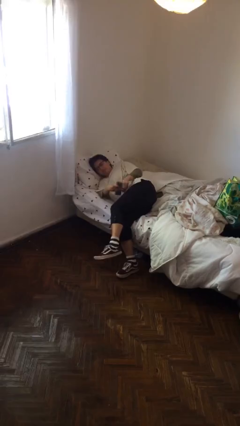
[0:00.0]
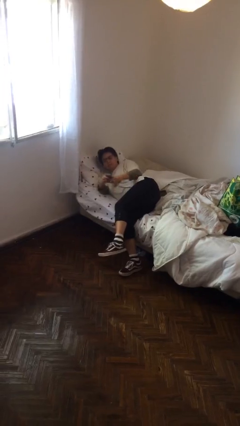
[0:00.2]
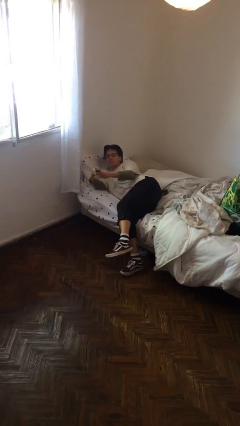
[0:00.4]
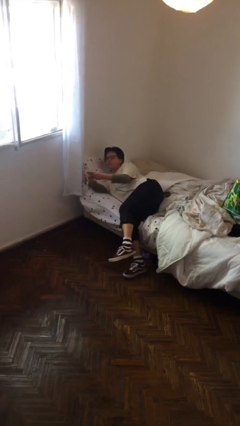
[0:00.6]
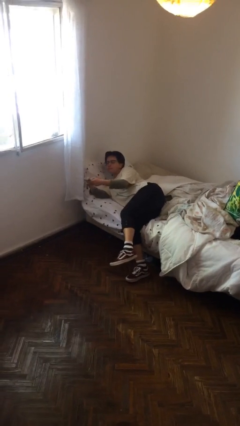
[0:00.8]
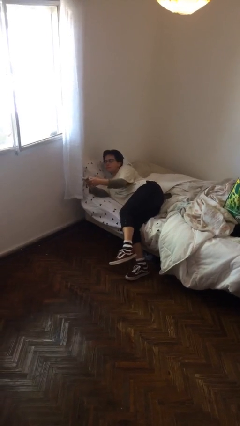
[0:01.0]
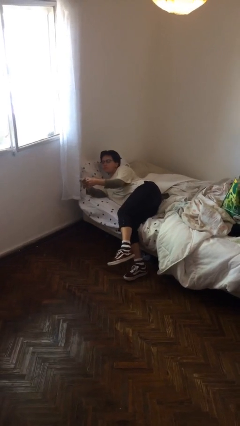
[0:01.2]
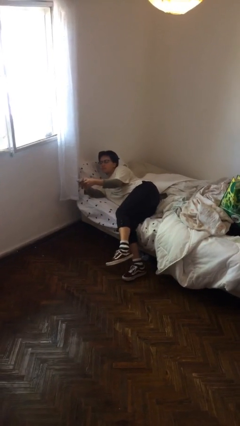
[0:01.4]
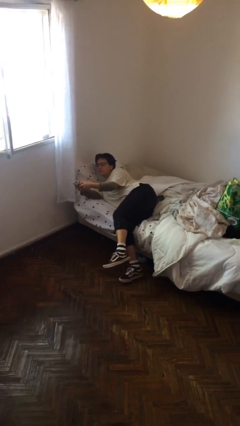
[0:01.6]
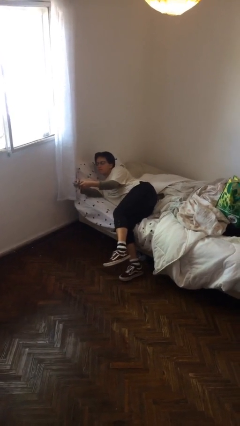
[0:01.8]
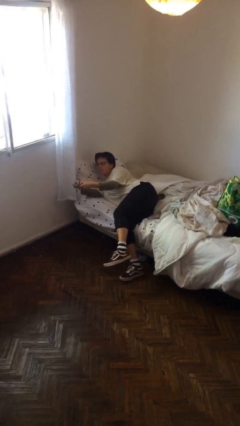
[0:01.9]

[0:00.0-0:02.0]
person uses television remote

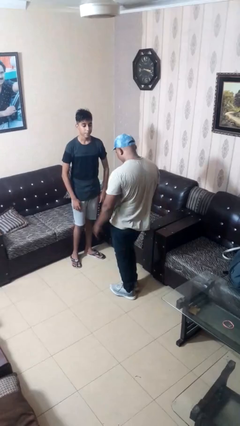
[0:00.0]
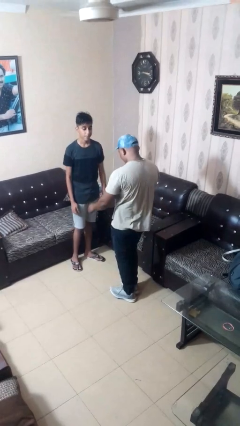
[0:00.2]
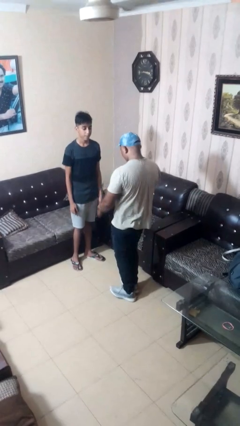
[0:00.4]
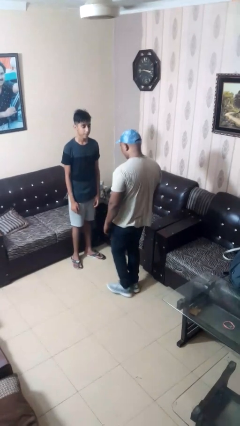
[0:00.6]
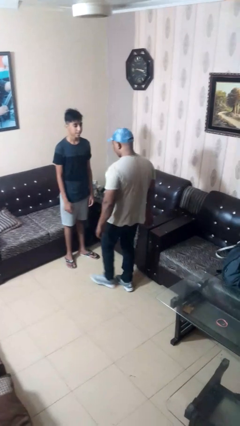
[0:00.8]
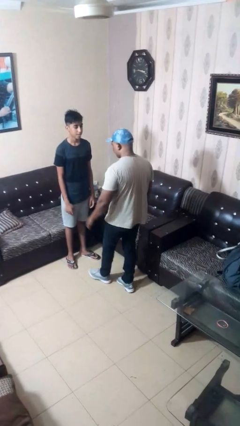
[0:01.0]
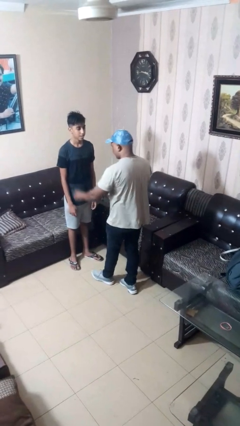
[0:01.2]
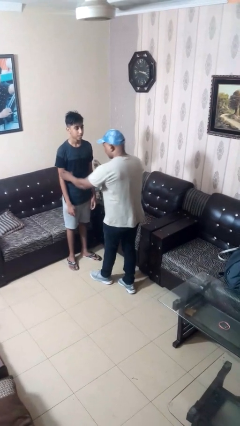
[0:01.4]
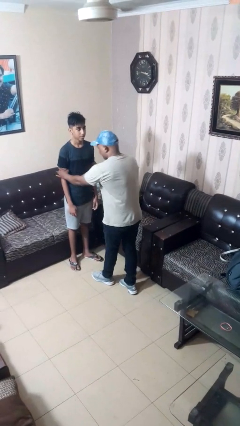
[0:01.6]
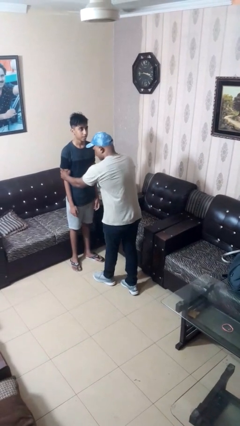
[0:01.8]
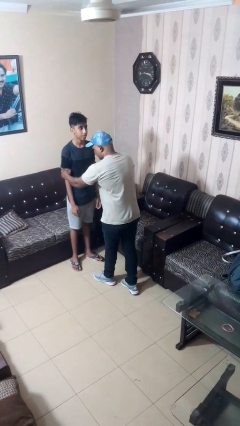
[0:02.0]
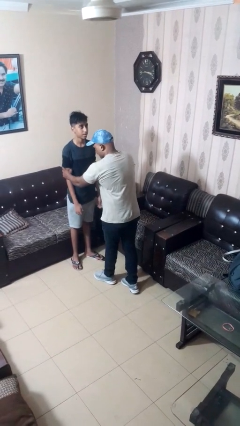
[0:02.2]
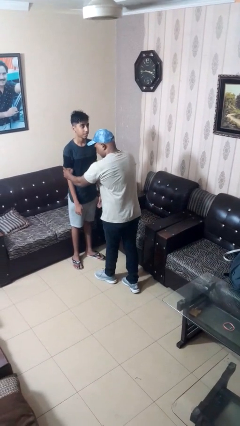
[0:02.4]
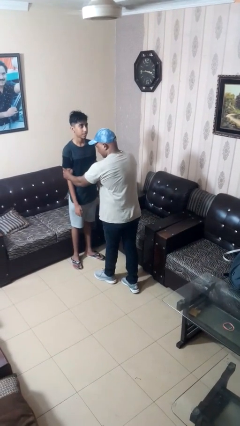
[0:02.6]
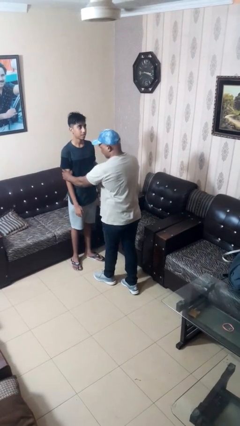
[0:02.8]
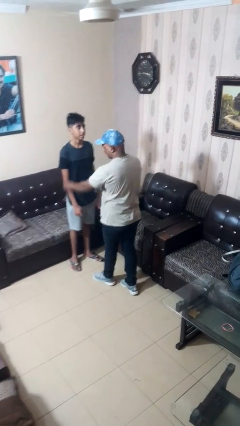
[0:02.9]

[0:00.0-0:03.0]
person grabs person by bicep

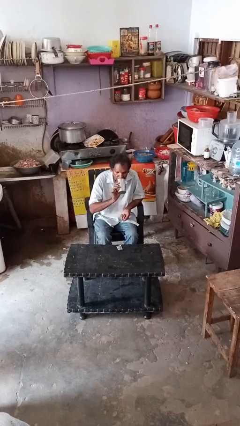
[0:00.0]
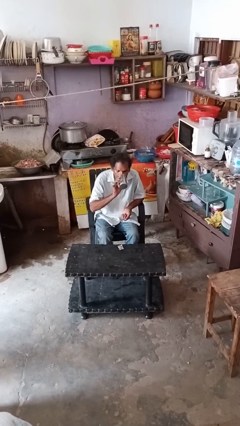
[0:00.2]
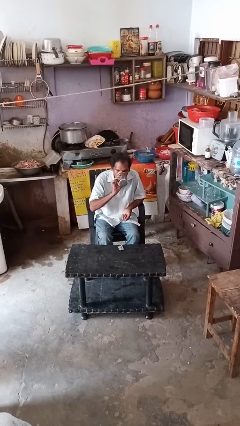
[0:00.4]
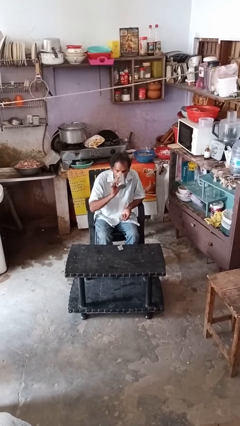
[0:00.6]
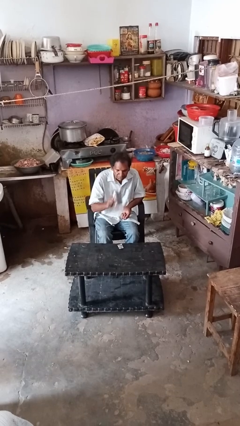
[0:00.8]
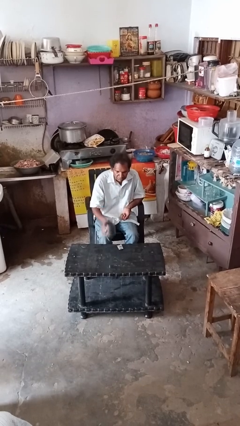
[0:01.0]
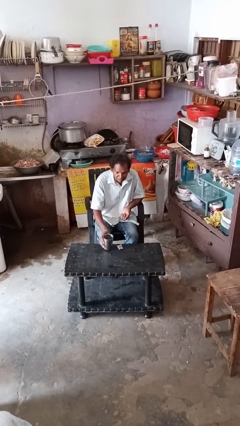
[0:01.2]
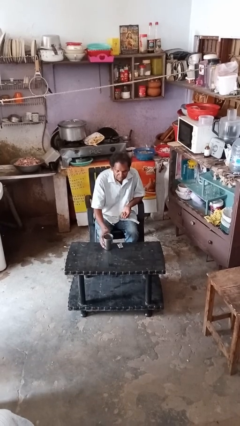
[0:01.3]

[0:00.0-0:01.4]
person drinks from cup

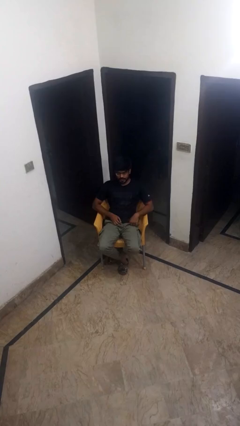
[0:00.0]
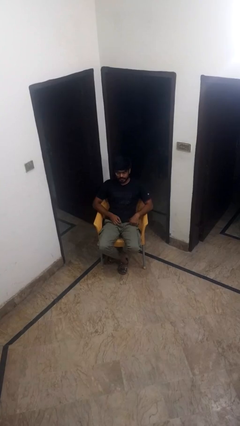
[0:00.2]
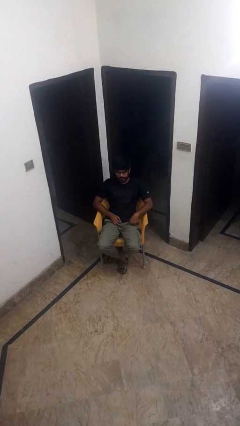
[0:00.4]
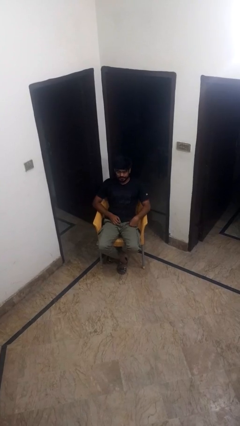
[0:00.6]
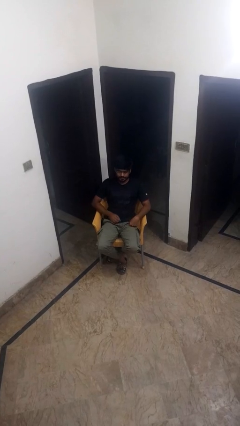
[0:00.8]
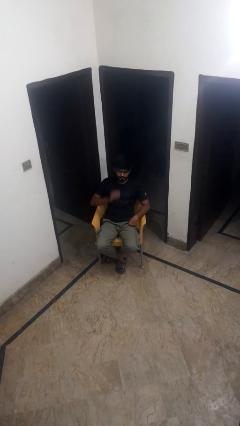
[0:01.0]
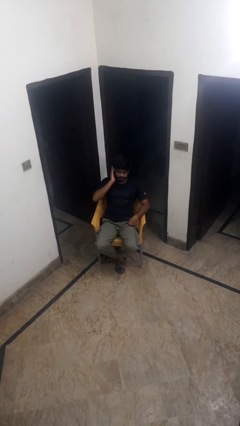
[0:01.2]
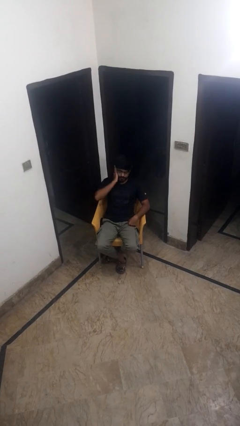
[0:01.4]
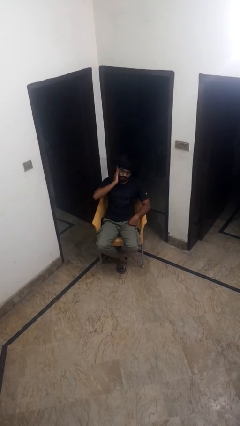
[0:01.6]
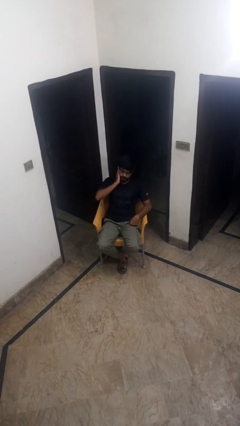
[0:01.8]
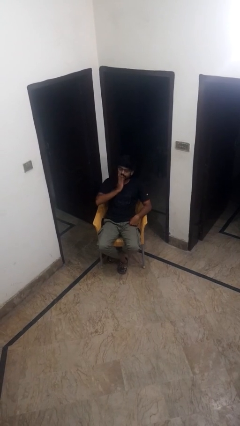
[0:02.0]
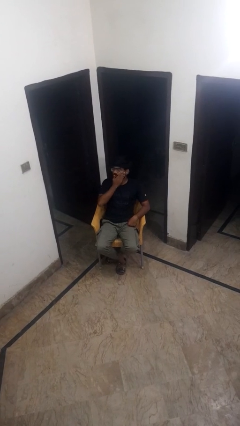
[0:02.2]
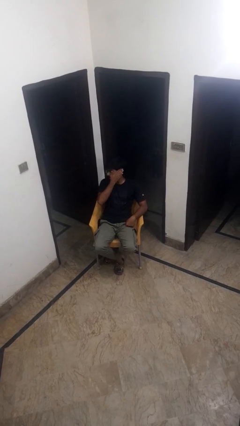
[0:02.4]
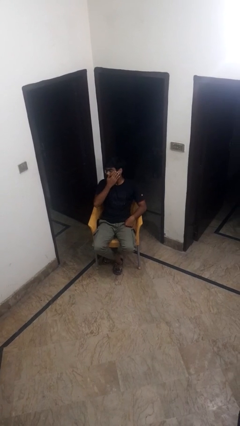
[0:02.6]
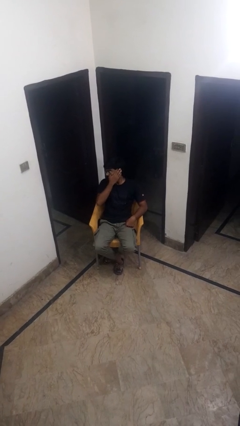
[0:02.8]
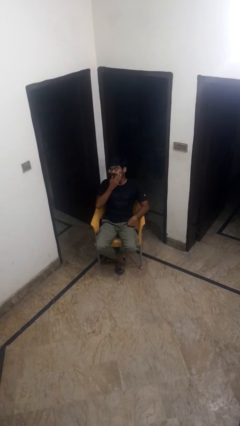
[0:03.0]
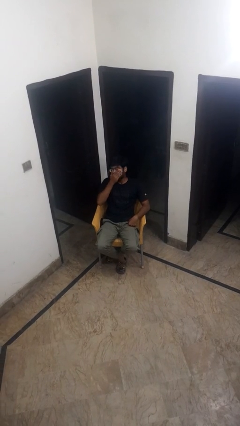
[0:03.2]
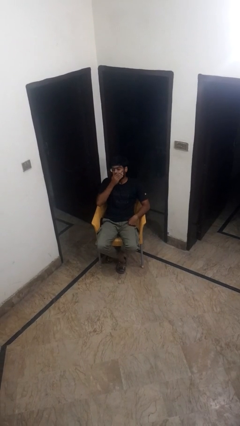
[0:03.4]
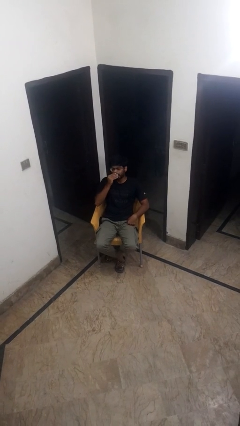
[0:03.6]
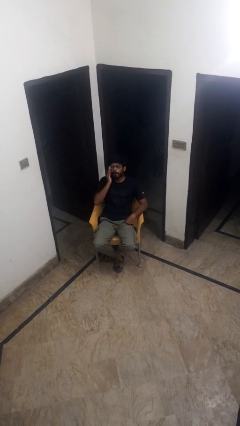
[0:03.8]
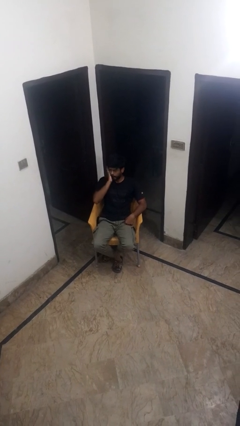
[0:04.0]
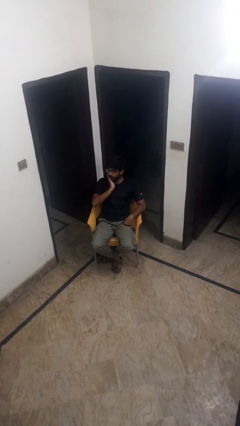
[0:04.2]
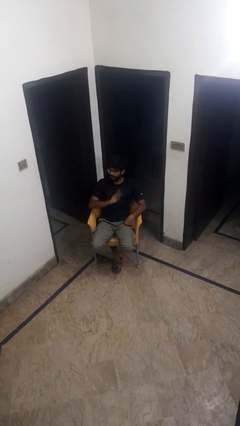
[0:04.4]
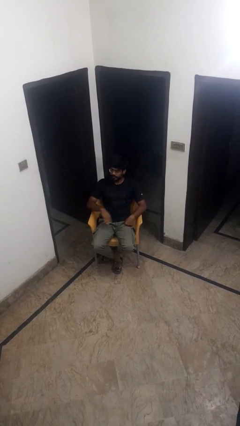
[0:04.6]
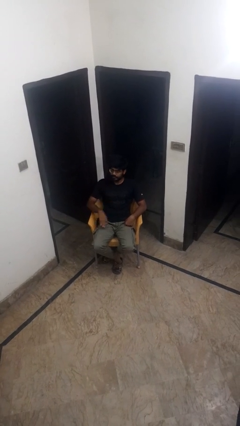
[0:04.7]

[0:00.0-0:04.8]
person scratches face

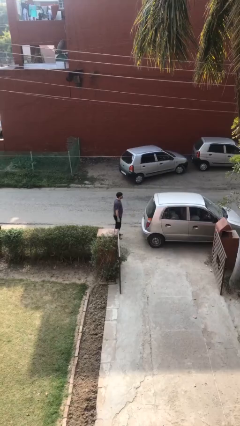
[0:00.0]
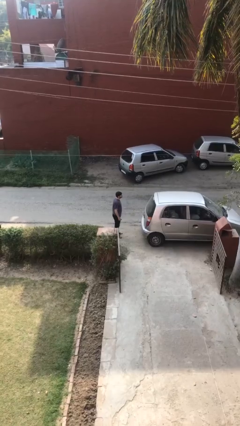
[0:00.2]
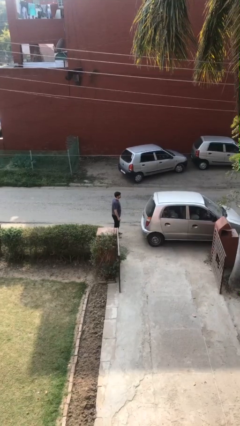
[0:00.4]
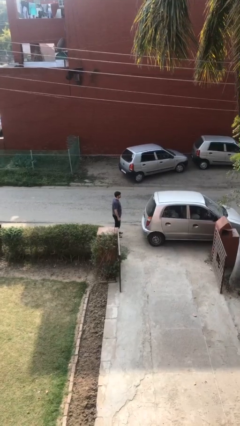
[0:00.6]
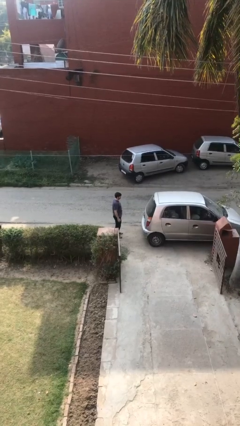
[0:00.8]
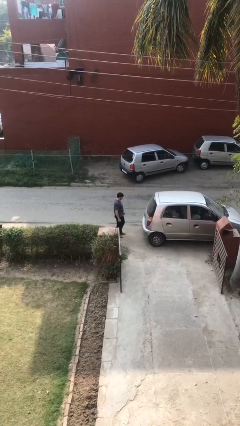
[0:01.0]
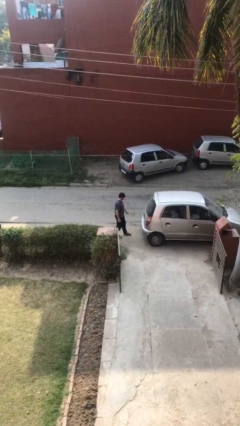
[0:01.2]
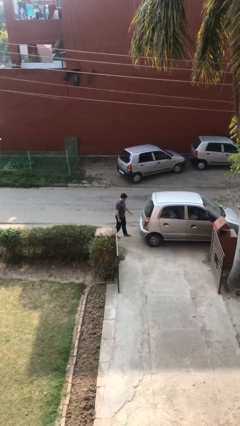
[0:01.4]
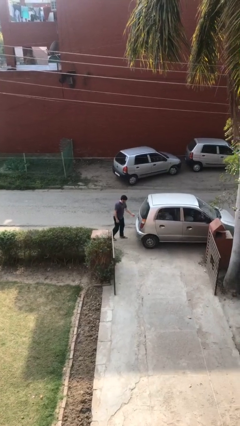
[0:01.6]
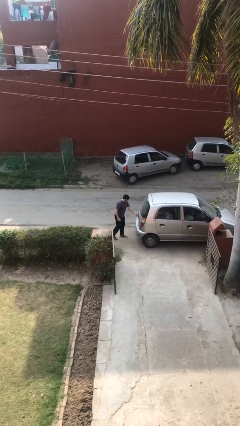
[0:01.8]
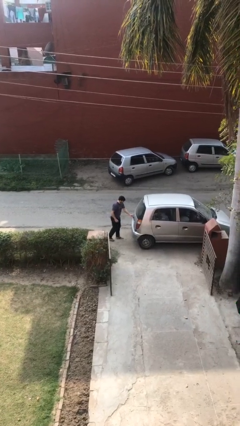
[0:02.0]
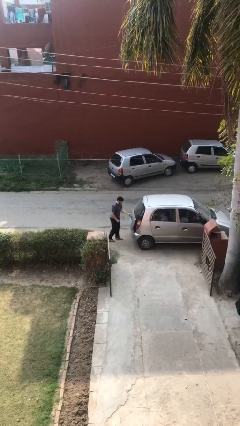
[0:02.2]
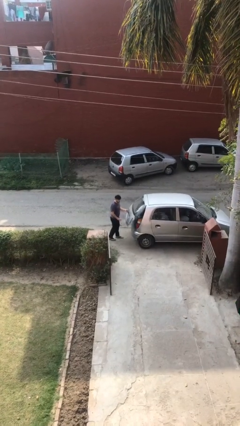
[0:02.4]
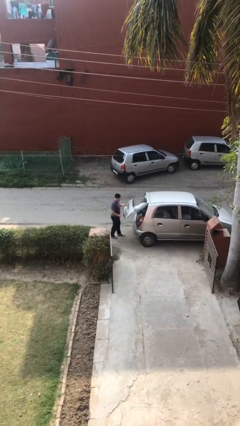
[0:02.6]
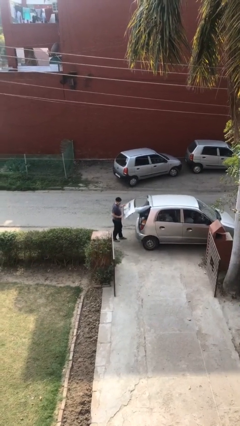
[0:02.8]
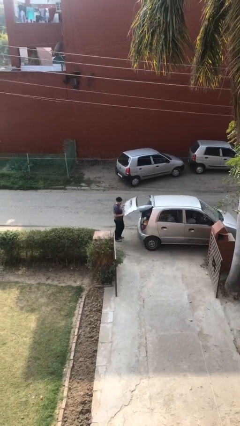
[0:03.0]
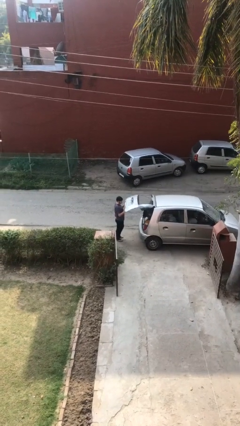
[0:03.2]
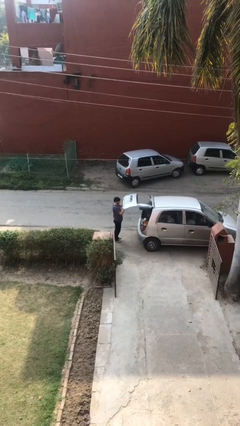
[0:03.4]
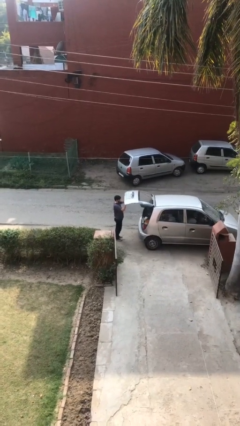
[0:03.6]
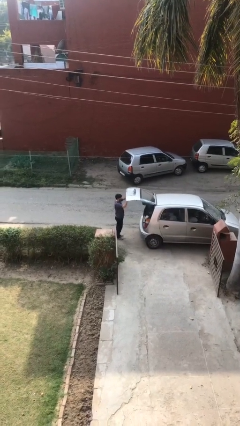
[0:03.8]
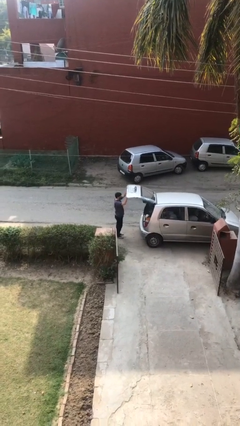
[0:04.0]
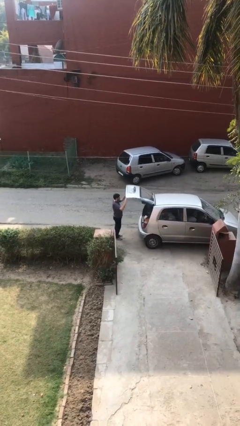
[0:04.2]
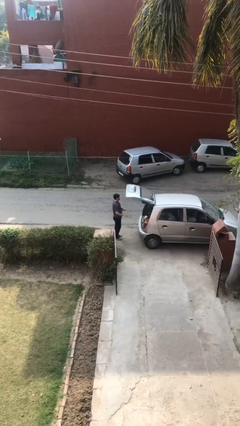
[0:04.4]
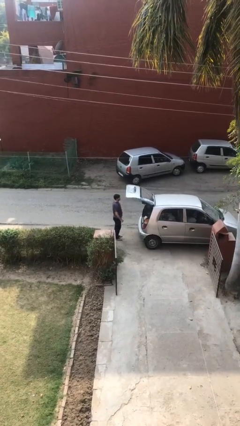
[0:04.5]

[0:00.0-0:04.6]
person opens car trunk

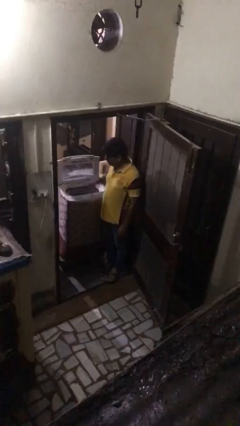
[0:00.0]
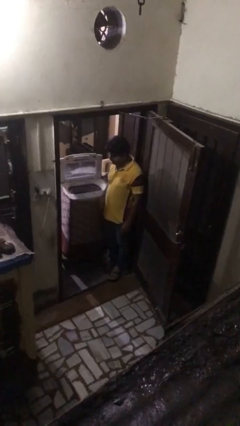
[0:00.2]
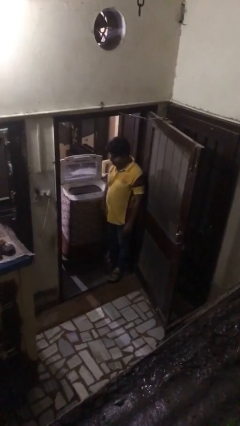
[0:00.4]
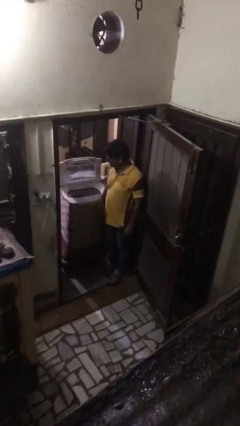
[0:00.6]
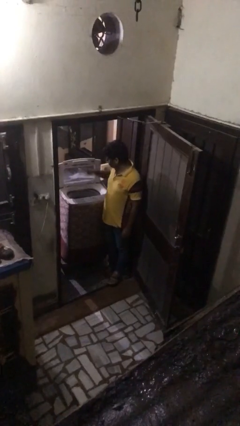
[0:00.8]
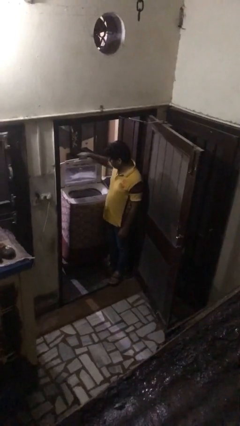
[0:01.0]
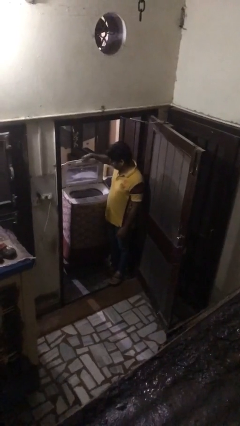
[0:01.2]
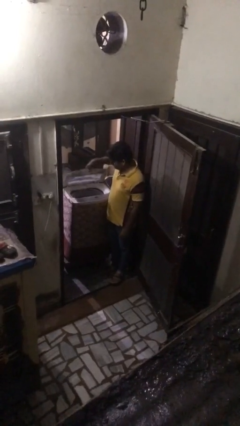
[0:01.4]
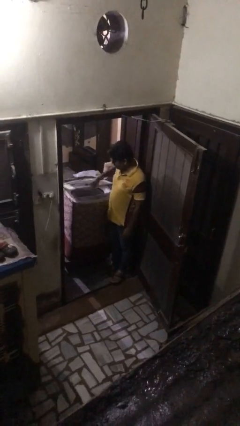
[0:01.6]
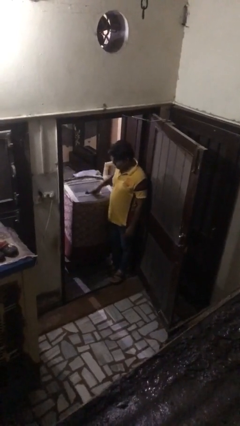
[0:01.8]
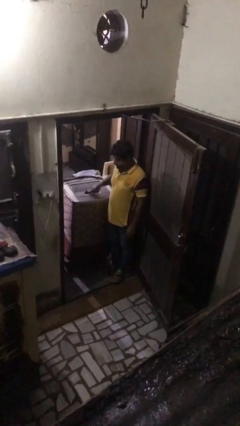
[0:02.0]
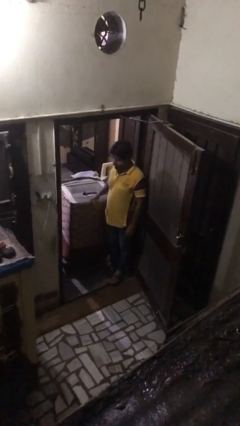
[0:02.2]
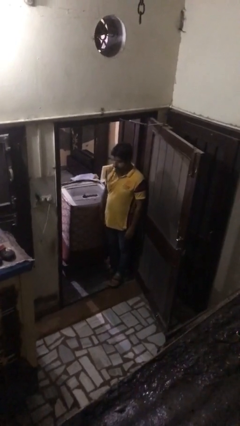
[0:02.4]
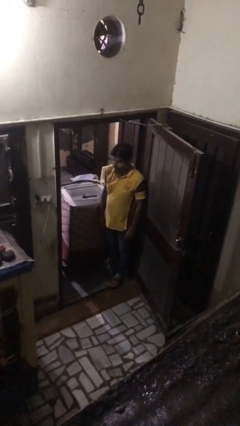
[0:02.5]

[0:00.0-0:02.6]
person closes clothes washer
